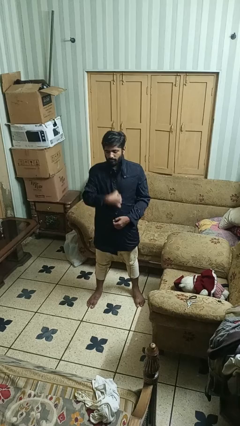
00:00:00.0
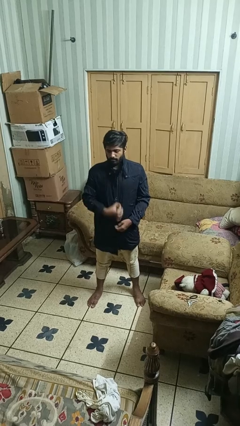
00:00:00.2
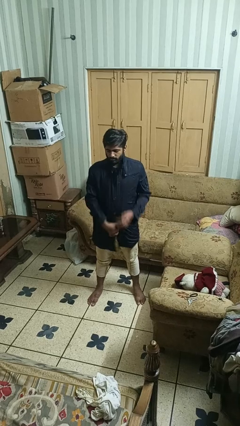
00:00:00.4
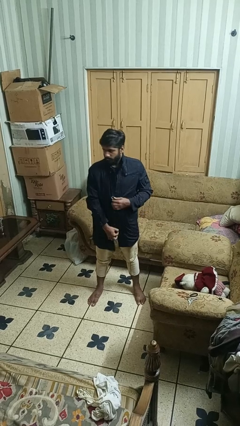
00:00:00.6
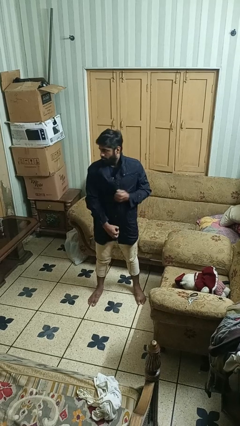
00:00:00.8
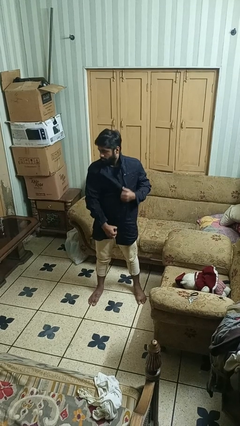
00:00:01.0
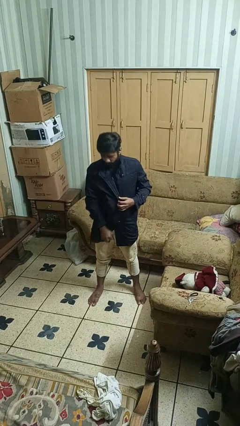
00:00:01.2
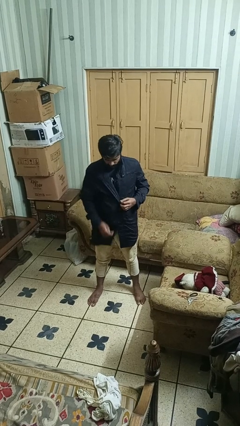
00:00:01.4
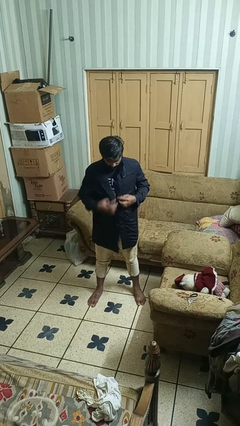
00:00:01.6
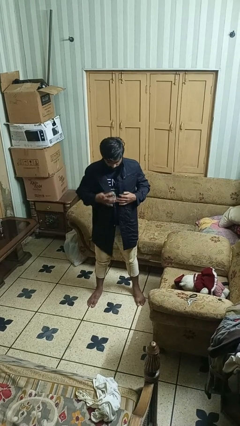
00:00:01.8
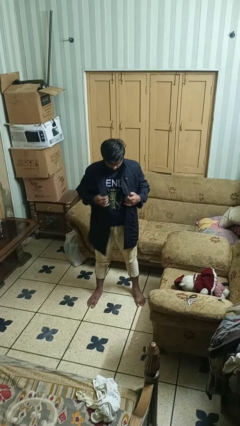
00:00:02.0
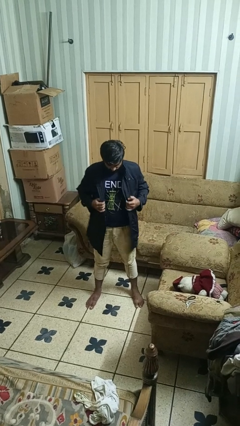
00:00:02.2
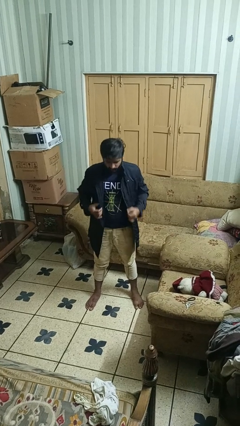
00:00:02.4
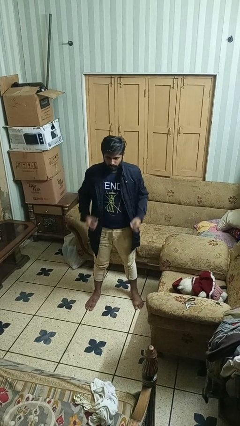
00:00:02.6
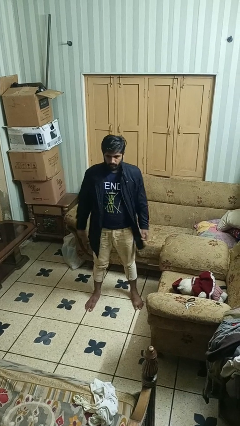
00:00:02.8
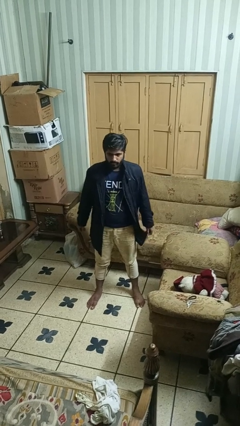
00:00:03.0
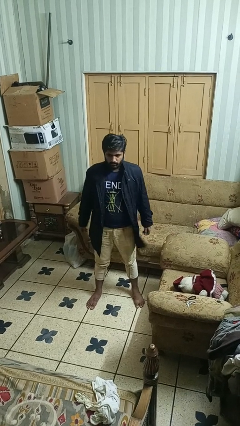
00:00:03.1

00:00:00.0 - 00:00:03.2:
person unzips jacket

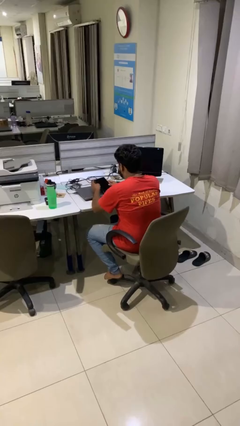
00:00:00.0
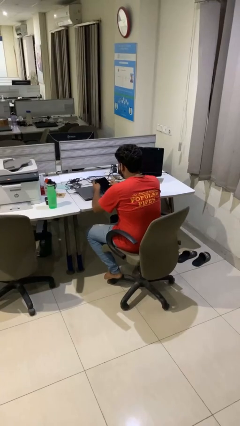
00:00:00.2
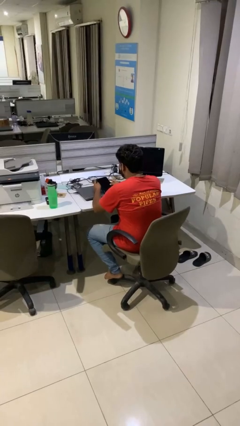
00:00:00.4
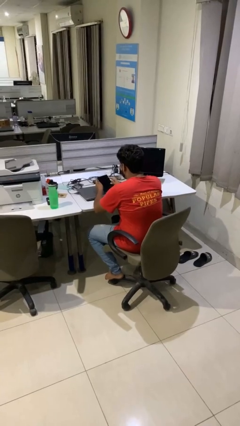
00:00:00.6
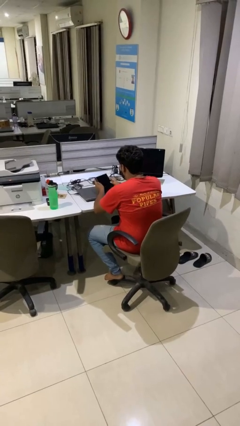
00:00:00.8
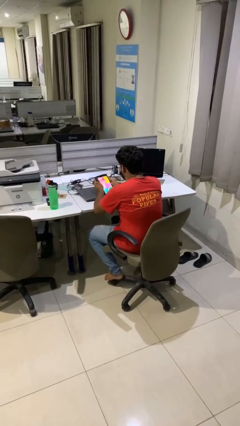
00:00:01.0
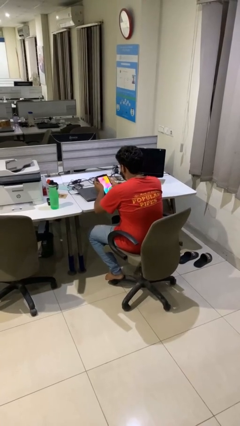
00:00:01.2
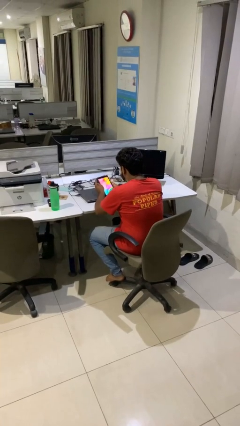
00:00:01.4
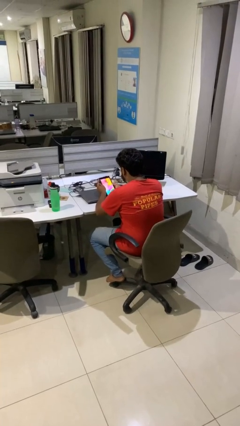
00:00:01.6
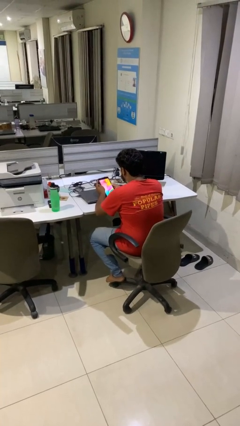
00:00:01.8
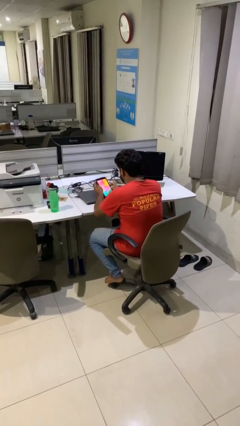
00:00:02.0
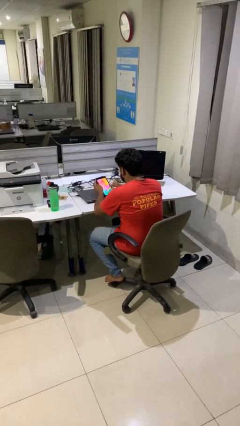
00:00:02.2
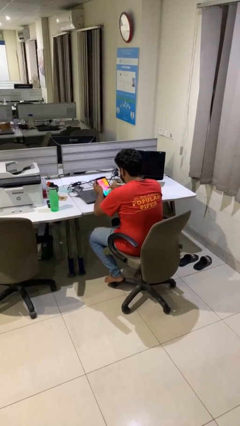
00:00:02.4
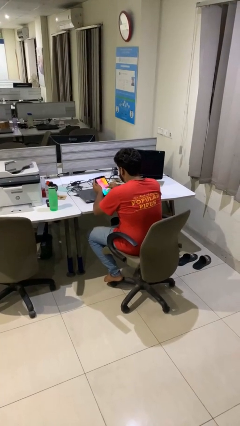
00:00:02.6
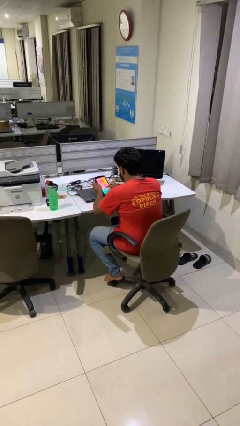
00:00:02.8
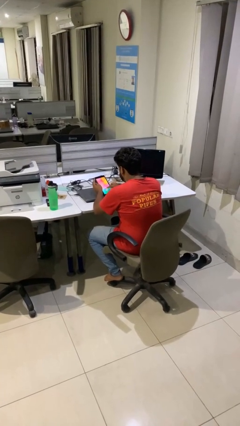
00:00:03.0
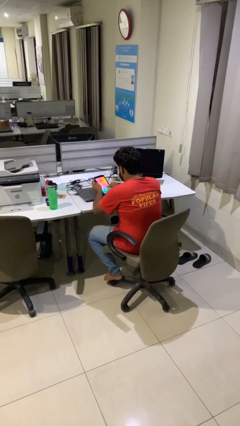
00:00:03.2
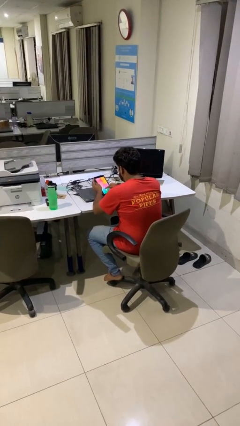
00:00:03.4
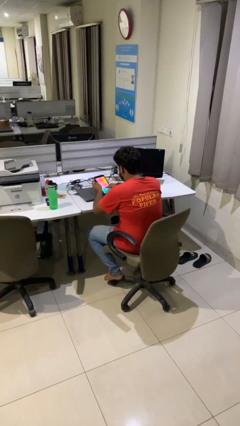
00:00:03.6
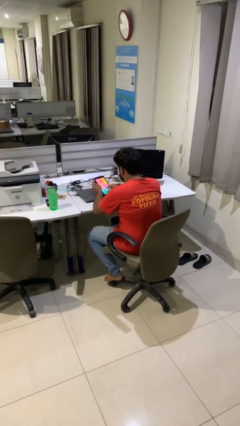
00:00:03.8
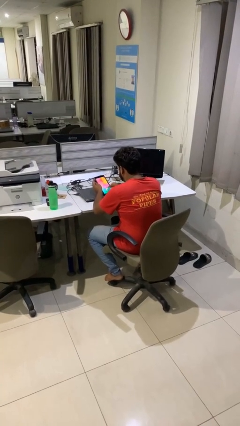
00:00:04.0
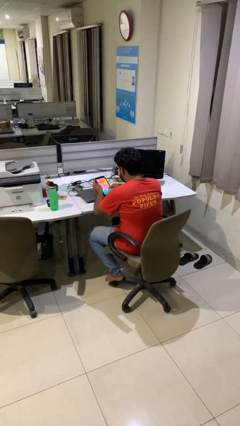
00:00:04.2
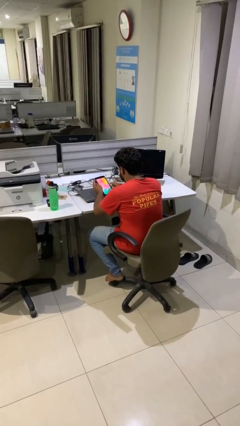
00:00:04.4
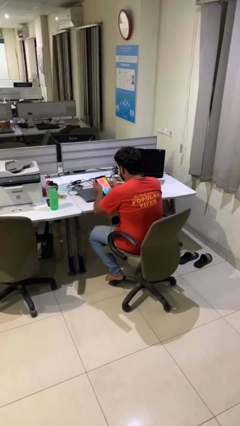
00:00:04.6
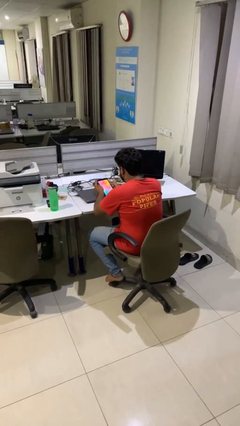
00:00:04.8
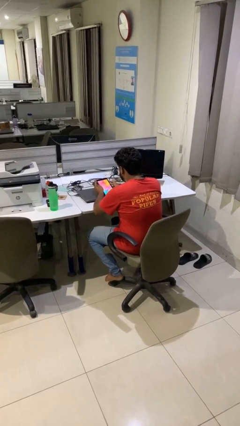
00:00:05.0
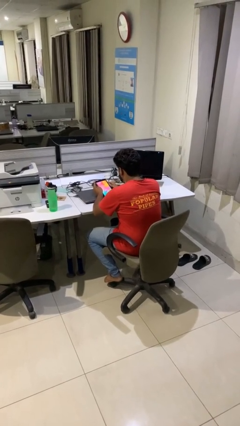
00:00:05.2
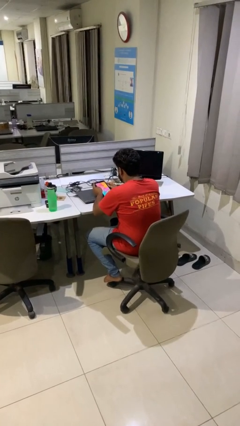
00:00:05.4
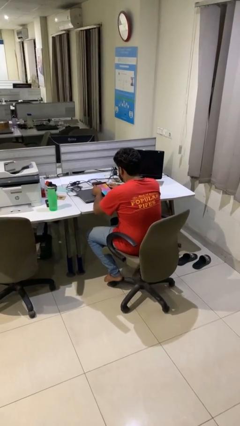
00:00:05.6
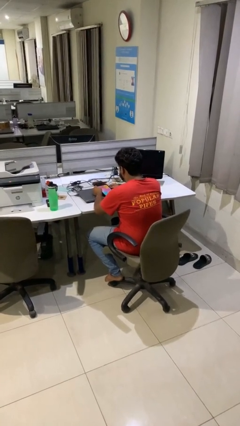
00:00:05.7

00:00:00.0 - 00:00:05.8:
person interacts with tablet

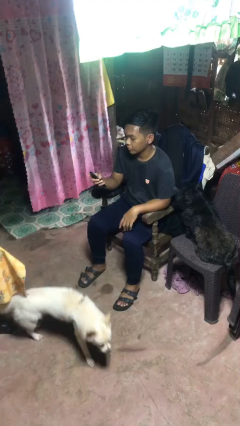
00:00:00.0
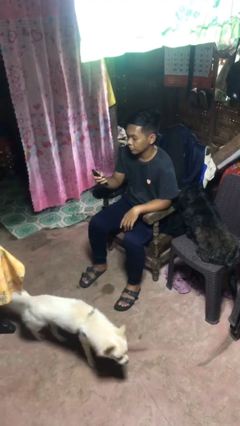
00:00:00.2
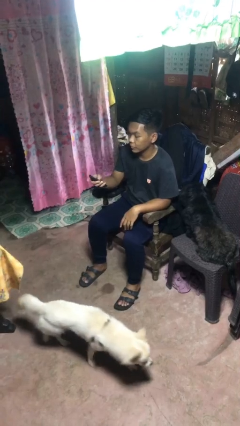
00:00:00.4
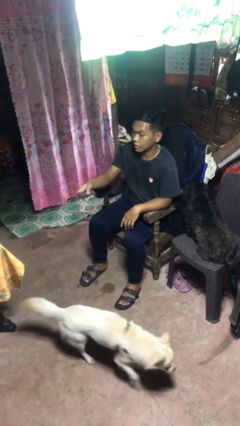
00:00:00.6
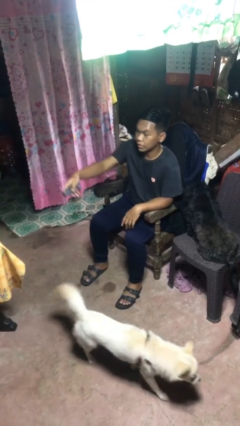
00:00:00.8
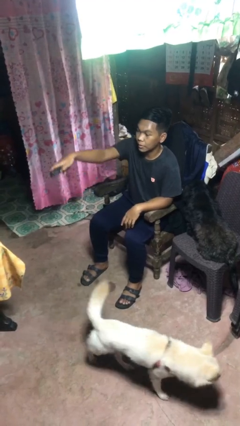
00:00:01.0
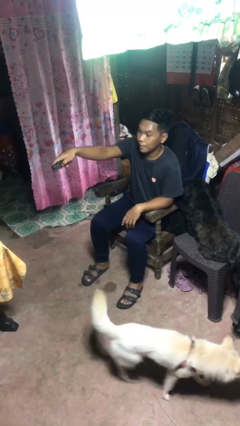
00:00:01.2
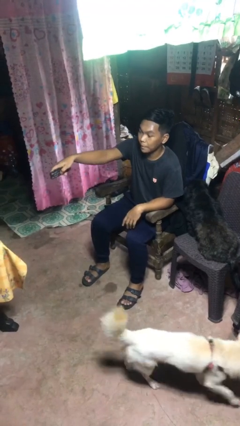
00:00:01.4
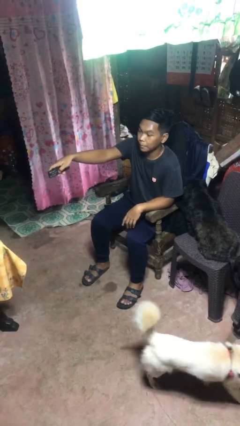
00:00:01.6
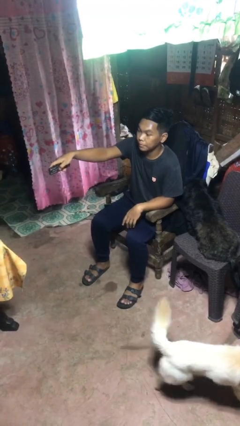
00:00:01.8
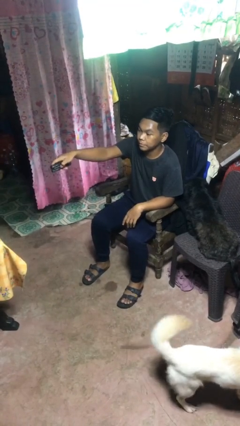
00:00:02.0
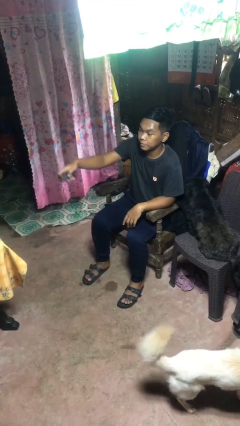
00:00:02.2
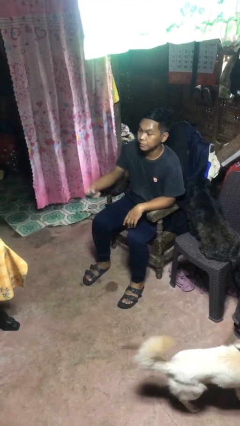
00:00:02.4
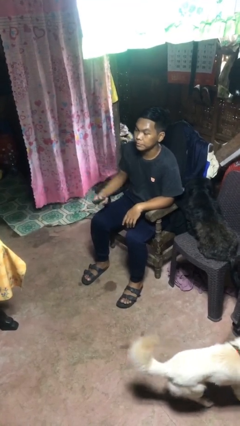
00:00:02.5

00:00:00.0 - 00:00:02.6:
person uses television remote

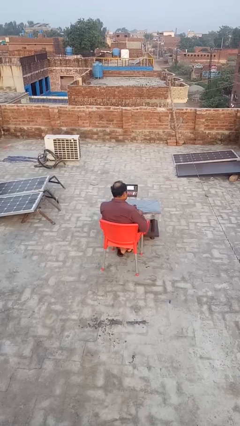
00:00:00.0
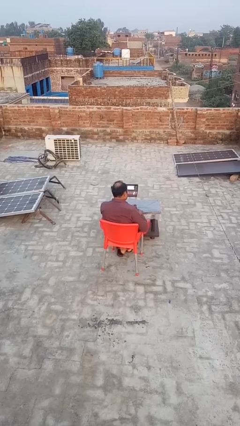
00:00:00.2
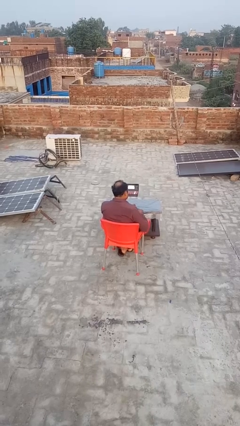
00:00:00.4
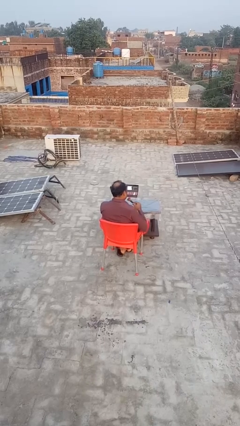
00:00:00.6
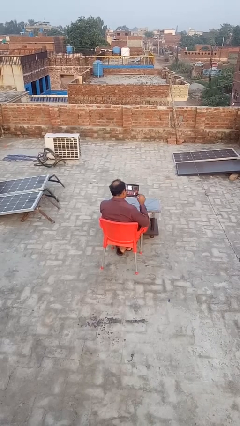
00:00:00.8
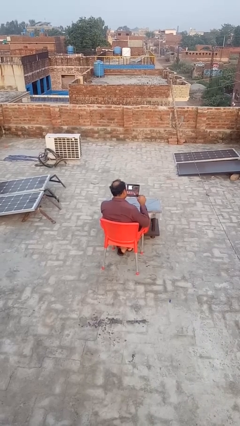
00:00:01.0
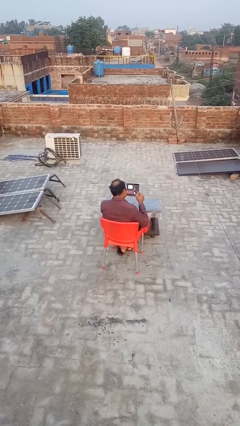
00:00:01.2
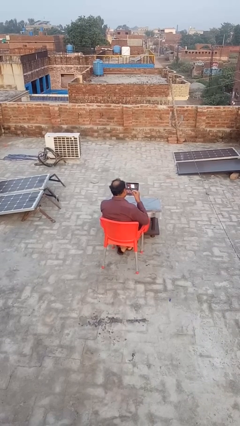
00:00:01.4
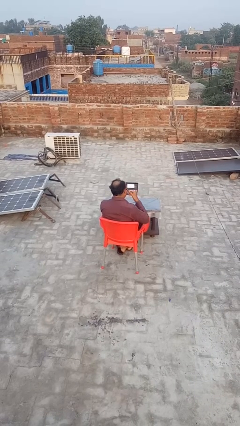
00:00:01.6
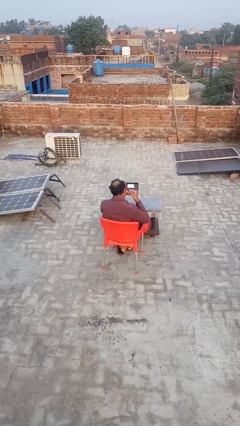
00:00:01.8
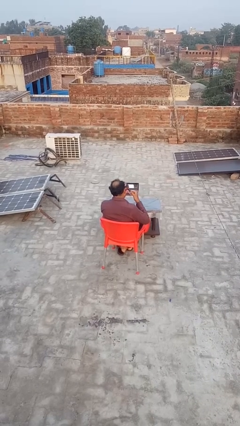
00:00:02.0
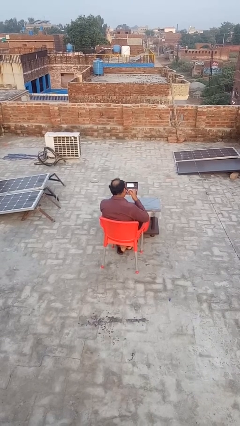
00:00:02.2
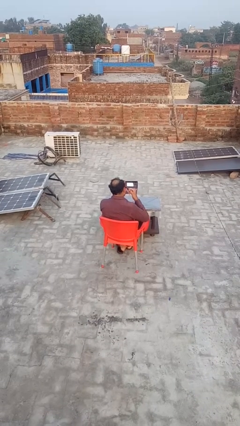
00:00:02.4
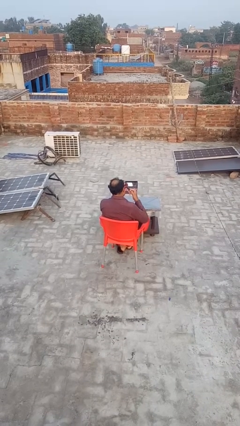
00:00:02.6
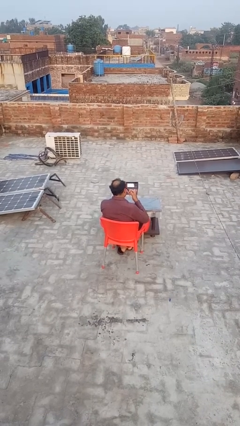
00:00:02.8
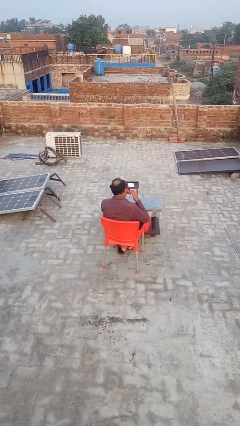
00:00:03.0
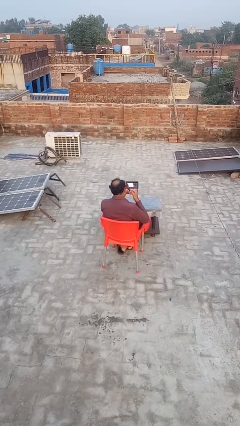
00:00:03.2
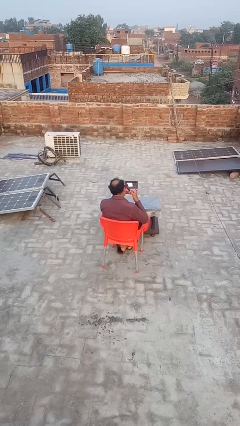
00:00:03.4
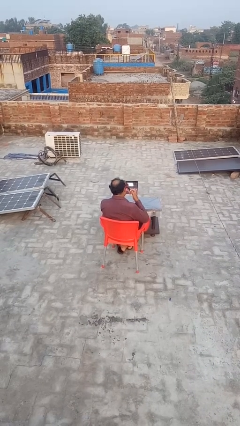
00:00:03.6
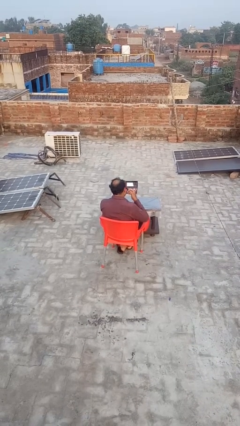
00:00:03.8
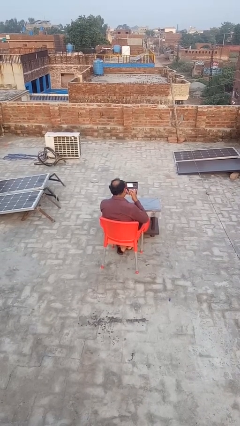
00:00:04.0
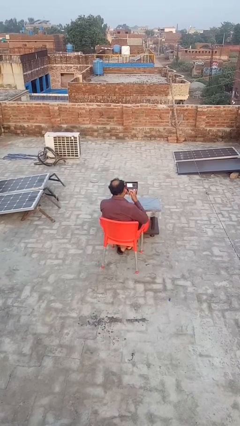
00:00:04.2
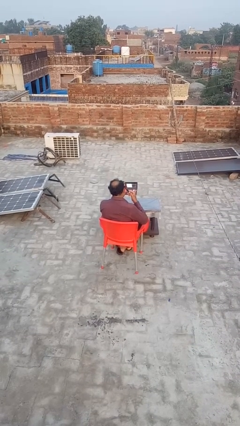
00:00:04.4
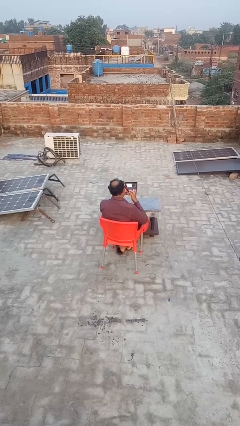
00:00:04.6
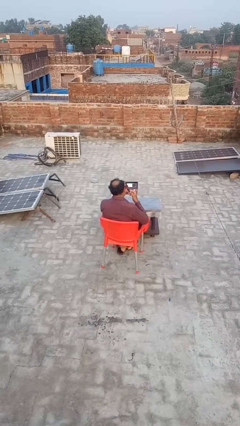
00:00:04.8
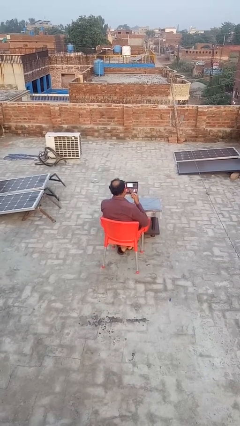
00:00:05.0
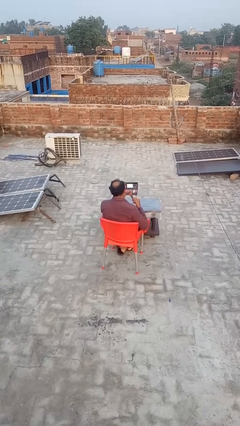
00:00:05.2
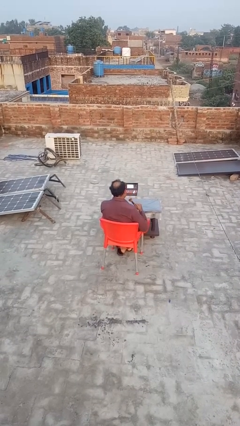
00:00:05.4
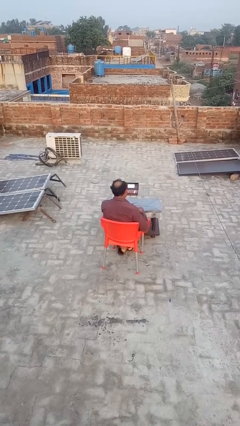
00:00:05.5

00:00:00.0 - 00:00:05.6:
person applies eye makeup

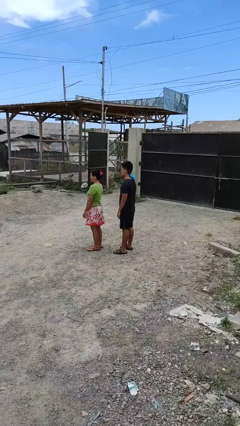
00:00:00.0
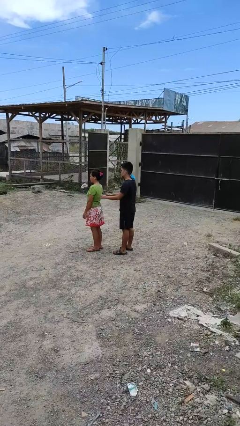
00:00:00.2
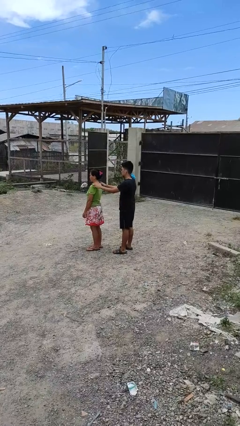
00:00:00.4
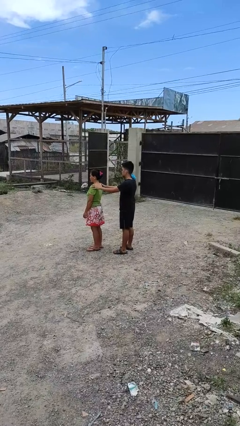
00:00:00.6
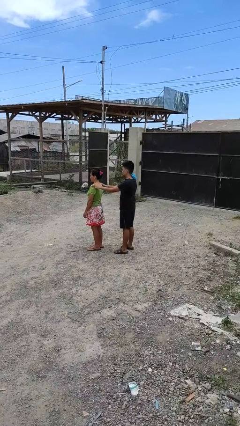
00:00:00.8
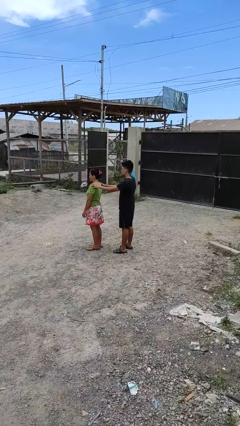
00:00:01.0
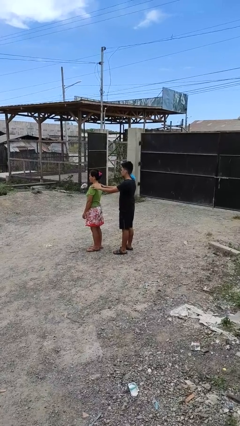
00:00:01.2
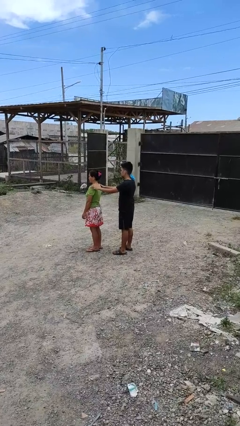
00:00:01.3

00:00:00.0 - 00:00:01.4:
person grabs person by shoulder
